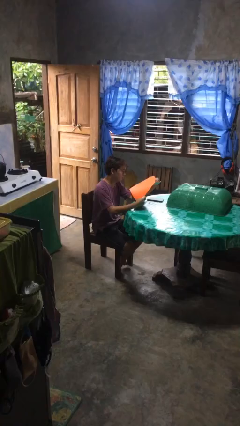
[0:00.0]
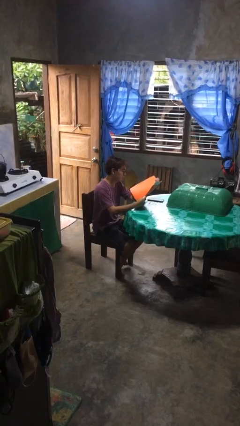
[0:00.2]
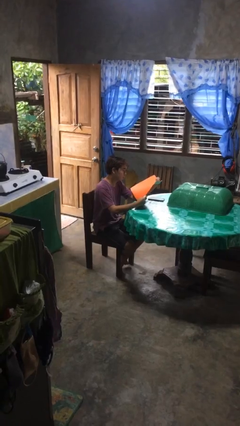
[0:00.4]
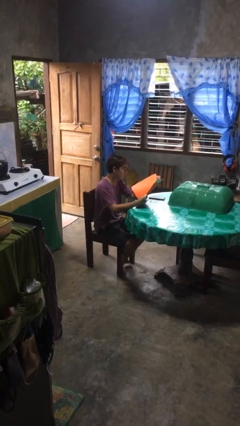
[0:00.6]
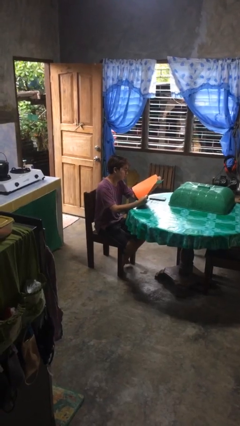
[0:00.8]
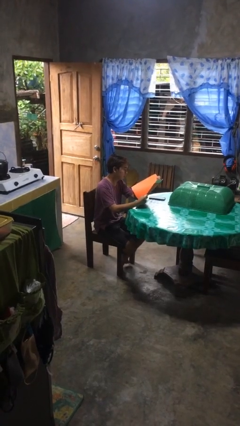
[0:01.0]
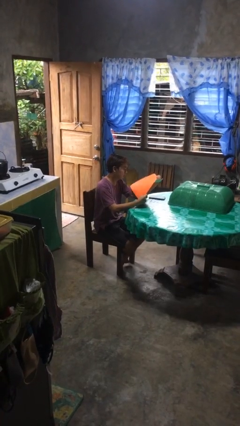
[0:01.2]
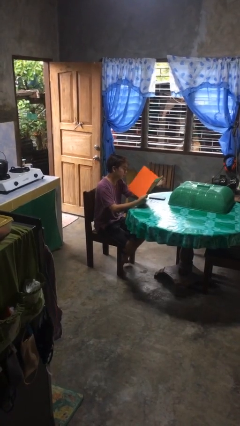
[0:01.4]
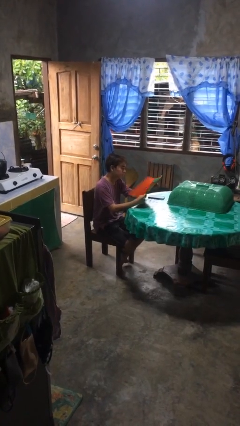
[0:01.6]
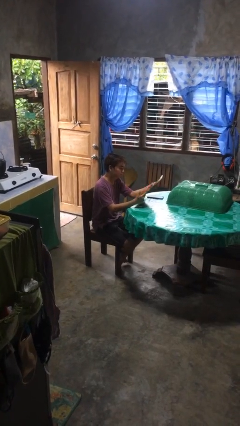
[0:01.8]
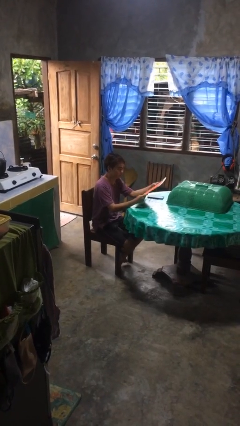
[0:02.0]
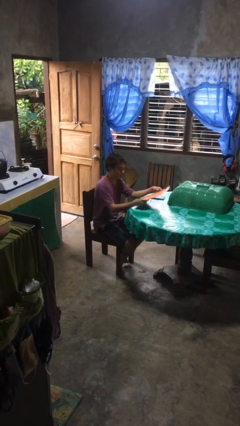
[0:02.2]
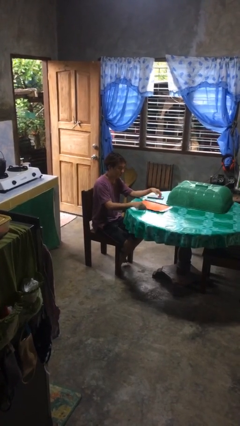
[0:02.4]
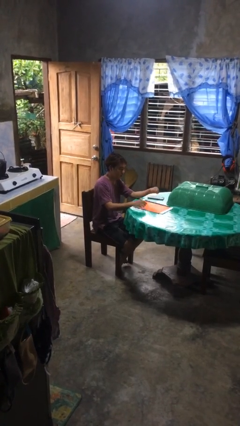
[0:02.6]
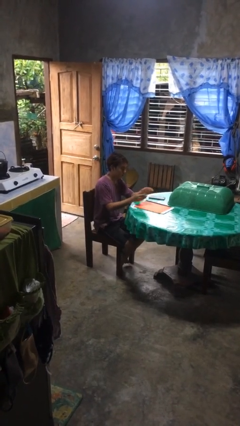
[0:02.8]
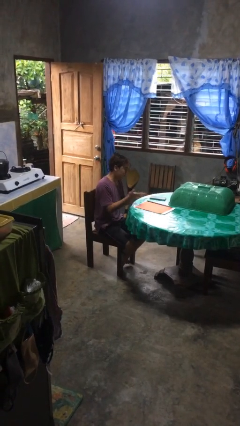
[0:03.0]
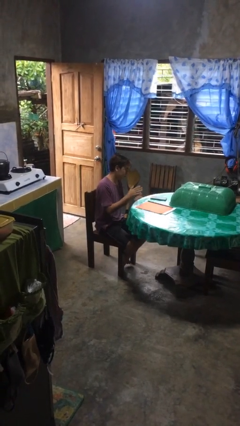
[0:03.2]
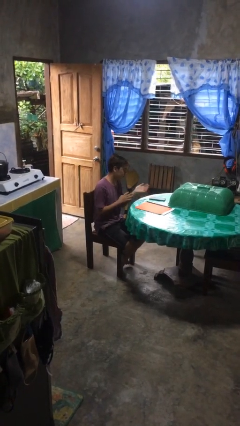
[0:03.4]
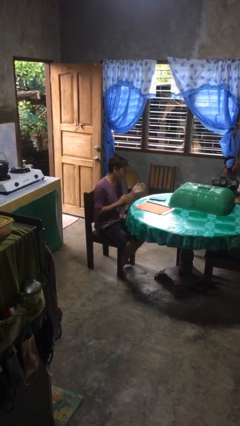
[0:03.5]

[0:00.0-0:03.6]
person puts down object on table

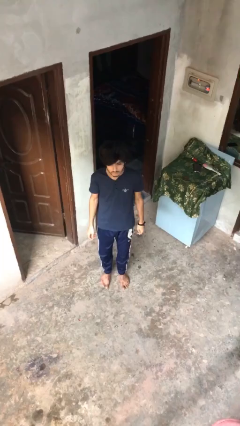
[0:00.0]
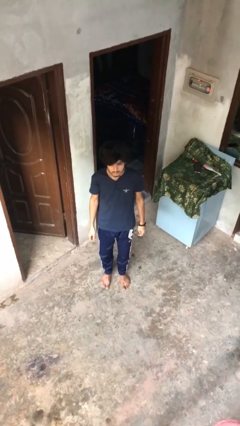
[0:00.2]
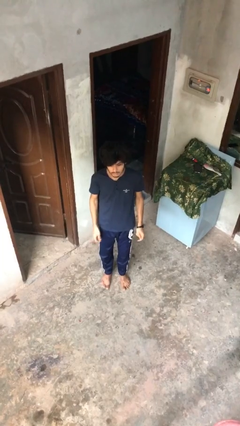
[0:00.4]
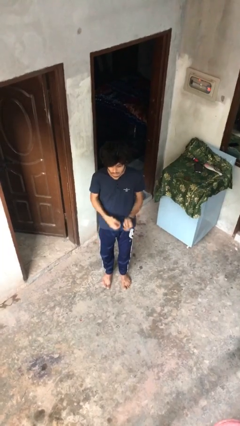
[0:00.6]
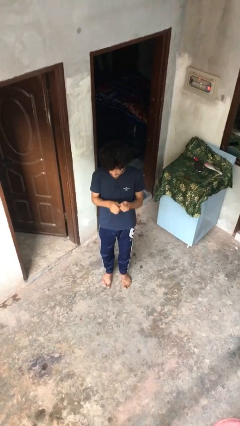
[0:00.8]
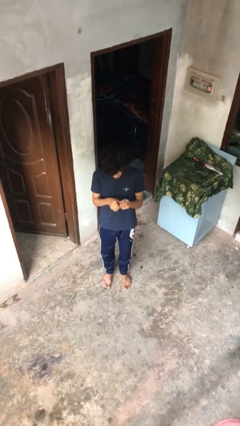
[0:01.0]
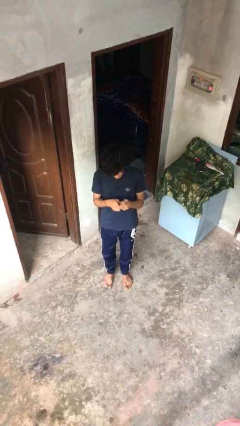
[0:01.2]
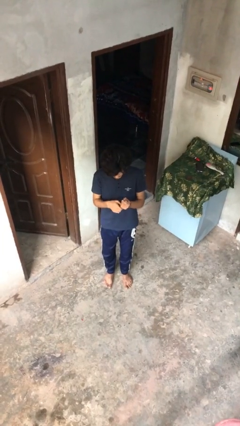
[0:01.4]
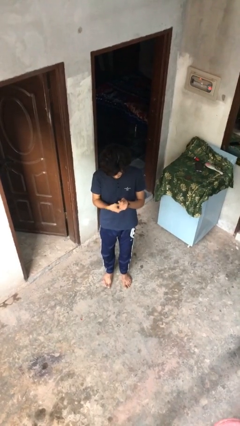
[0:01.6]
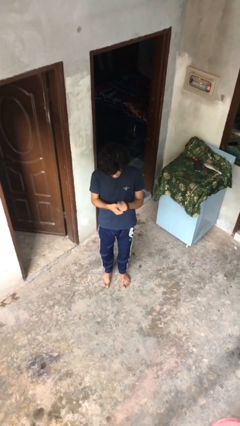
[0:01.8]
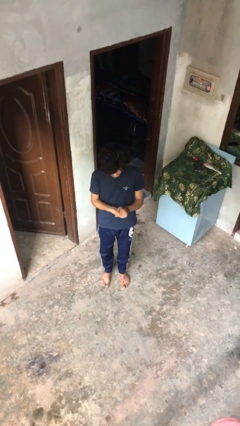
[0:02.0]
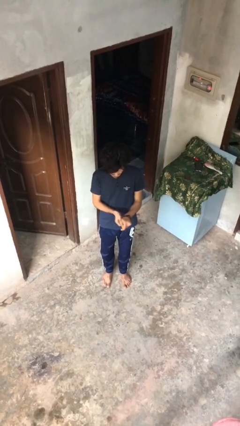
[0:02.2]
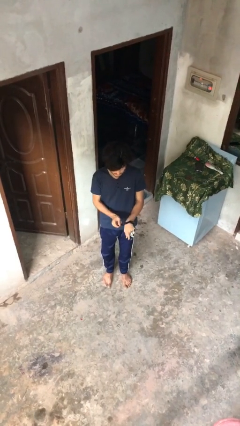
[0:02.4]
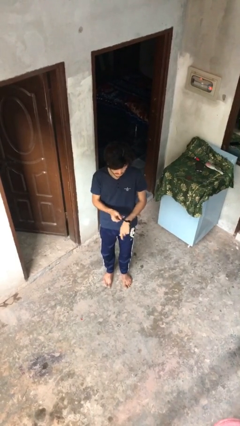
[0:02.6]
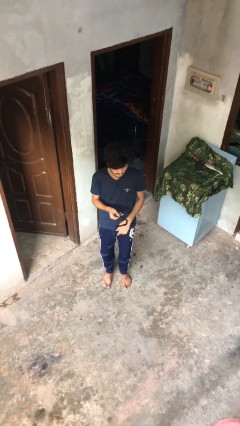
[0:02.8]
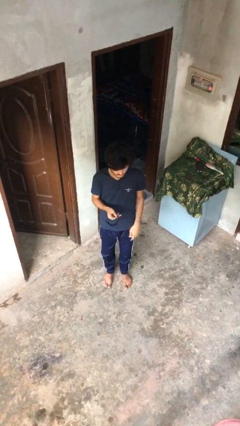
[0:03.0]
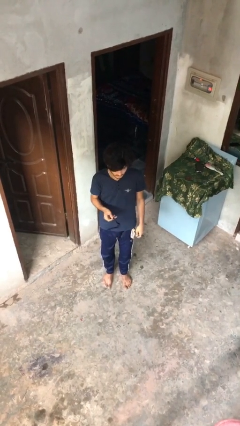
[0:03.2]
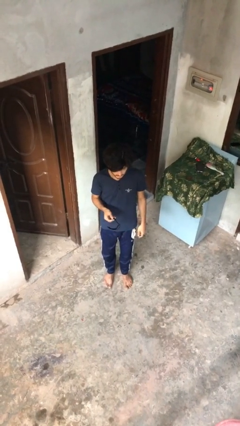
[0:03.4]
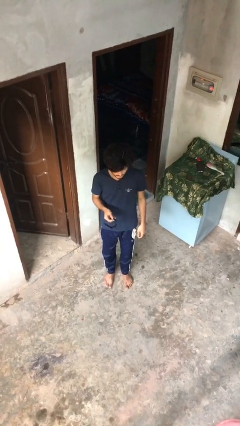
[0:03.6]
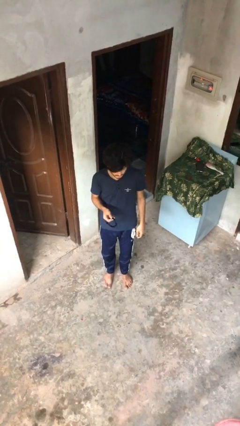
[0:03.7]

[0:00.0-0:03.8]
person takes off wristwatch

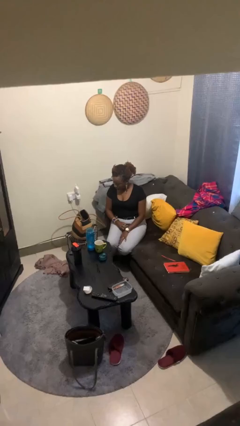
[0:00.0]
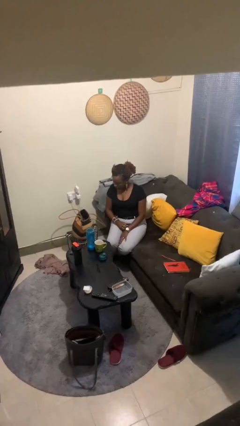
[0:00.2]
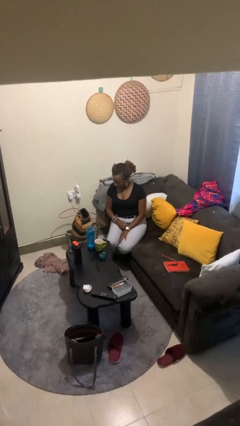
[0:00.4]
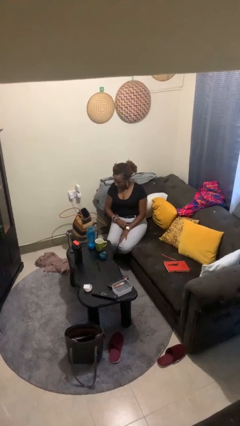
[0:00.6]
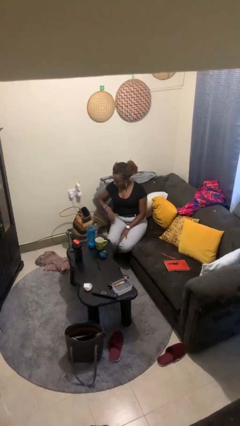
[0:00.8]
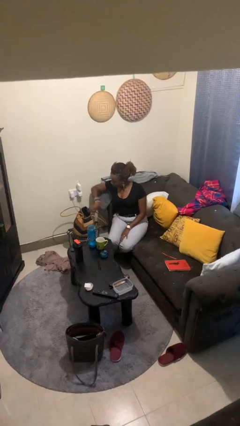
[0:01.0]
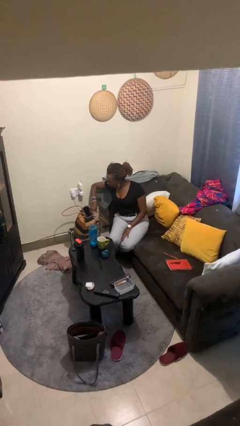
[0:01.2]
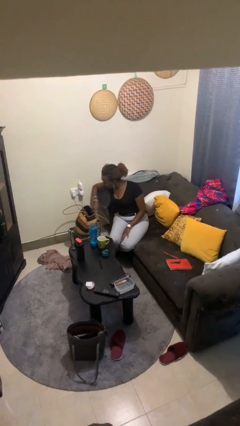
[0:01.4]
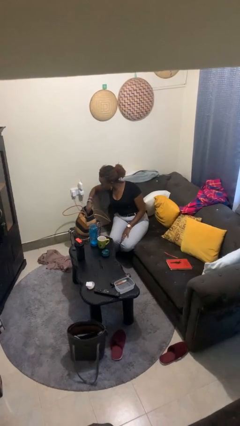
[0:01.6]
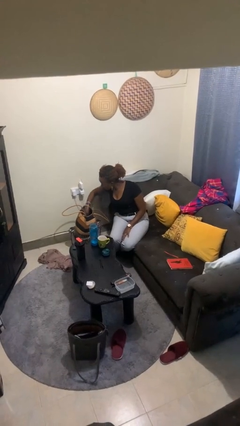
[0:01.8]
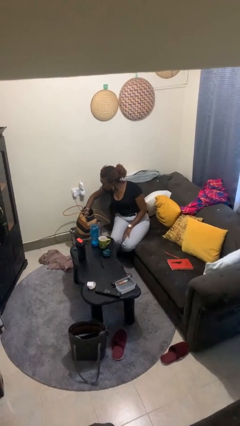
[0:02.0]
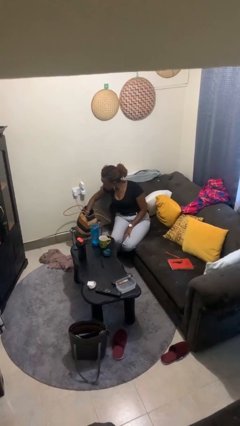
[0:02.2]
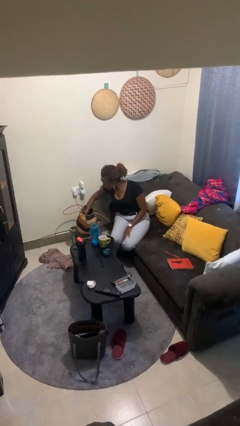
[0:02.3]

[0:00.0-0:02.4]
person searches in purse

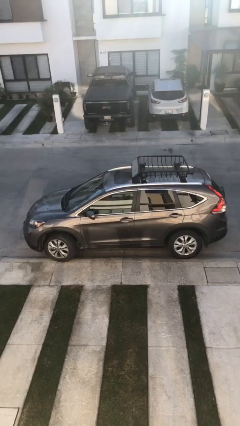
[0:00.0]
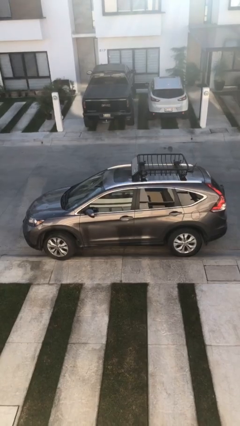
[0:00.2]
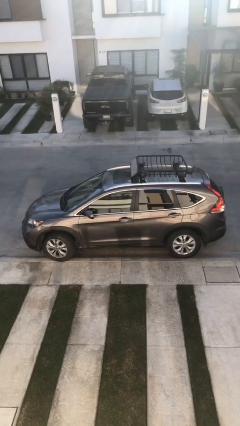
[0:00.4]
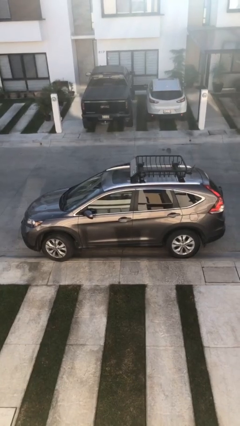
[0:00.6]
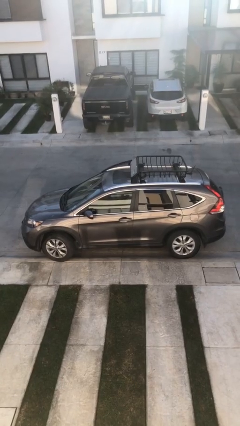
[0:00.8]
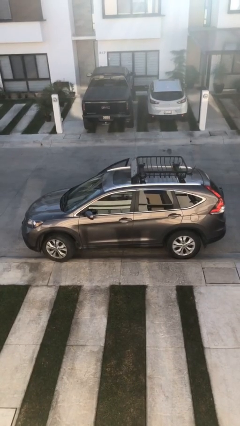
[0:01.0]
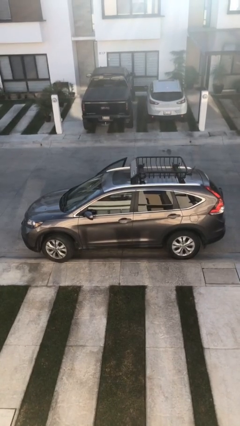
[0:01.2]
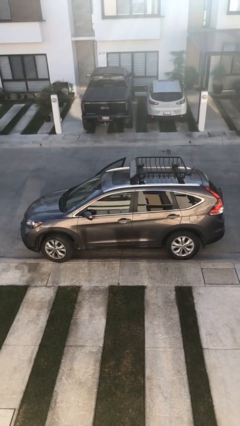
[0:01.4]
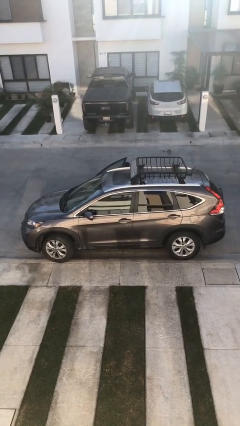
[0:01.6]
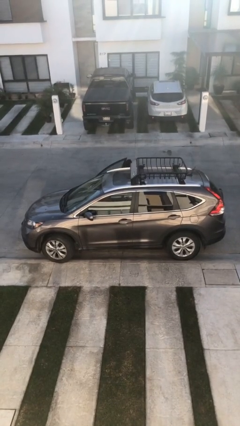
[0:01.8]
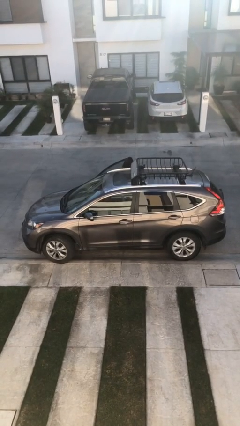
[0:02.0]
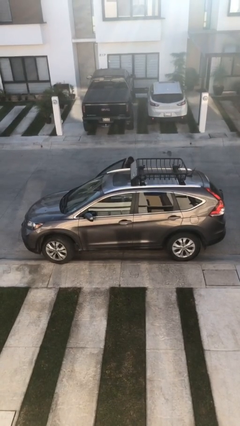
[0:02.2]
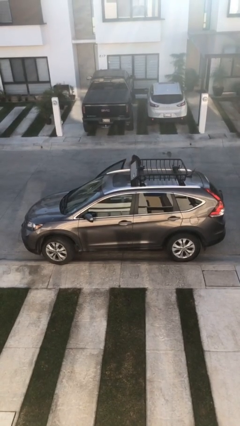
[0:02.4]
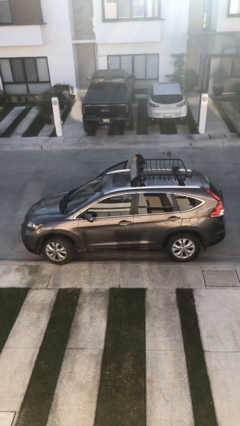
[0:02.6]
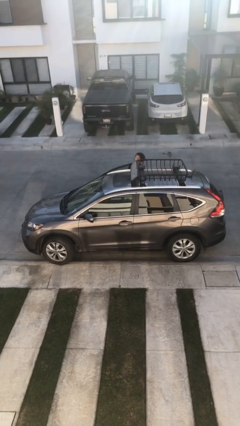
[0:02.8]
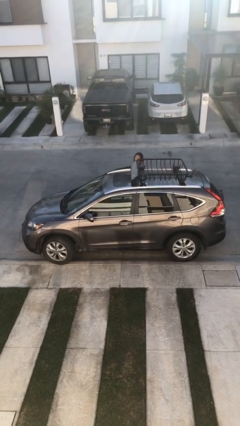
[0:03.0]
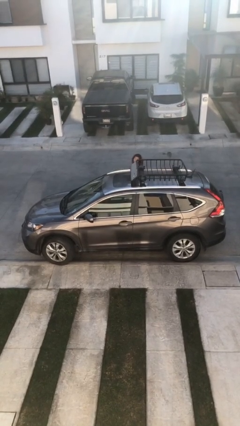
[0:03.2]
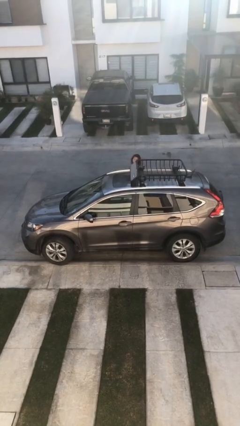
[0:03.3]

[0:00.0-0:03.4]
car drops off person

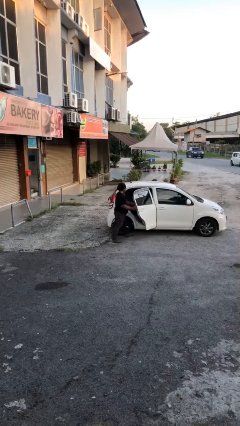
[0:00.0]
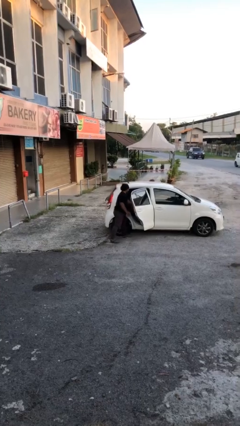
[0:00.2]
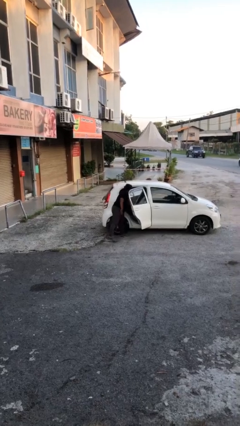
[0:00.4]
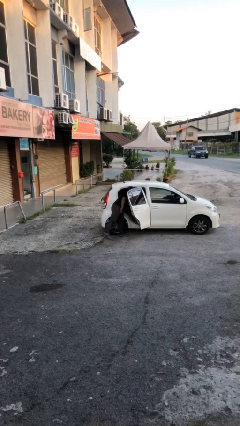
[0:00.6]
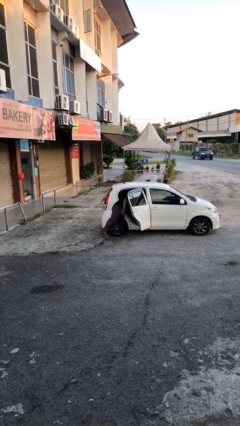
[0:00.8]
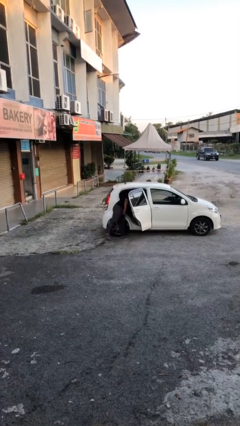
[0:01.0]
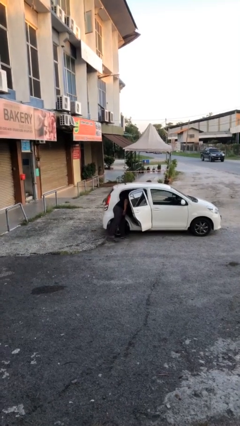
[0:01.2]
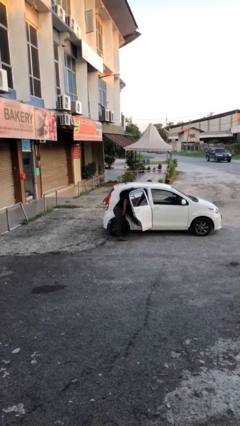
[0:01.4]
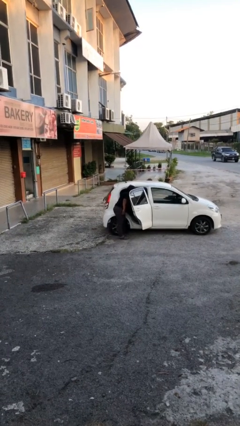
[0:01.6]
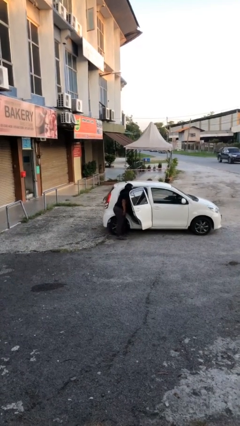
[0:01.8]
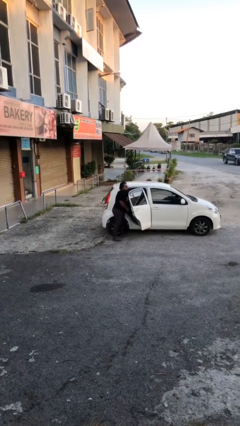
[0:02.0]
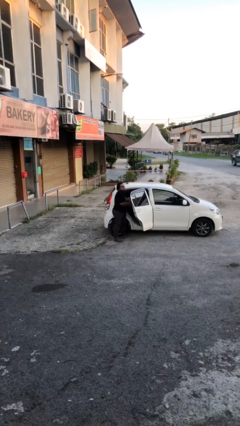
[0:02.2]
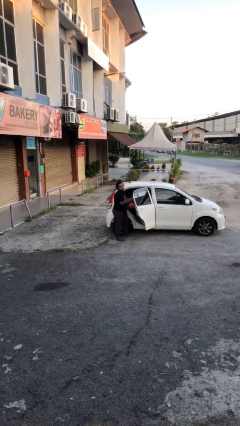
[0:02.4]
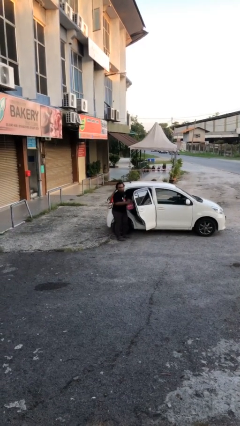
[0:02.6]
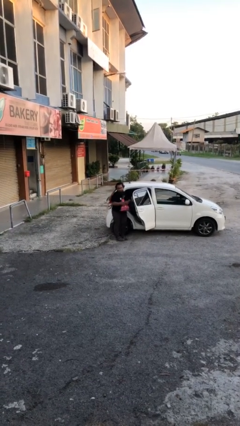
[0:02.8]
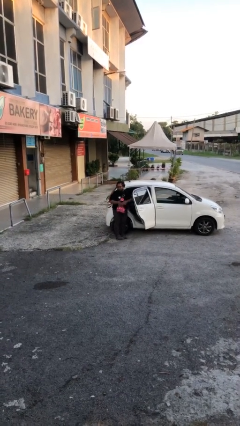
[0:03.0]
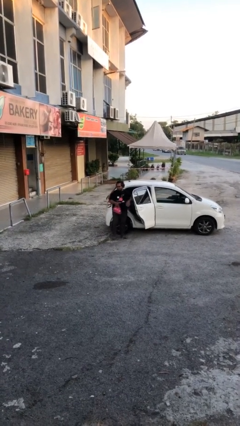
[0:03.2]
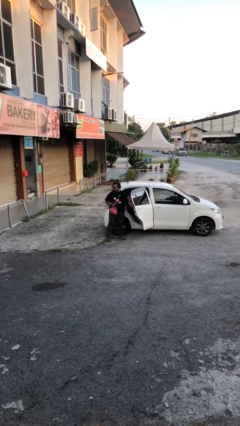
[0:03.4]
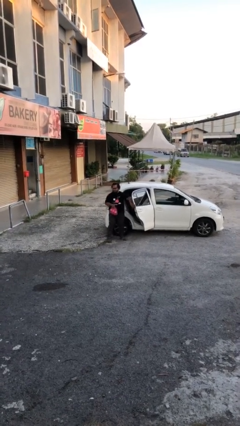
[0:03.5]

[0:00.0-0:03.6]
person unloads car

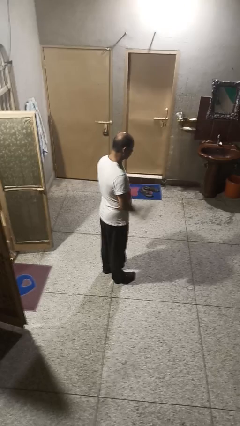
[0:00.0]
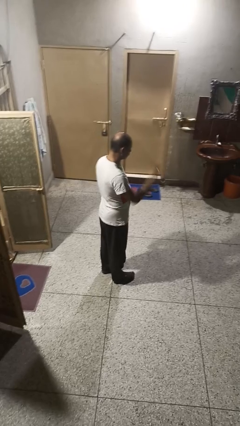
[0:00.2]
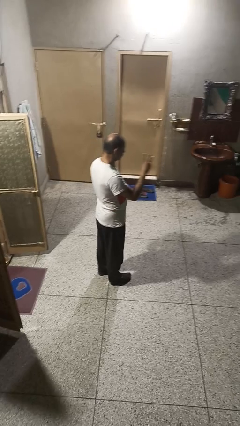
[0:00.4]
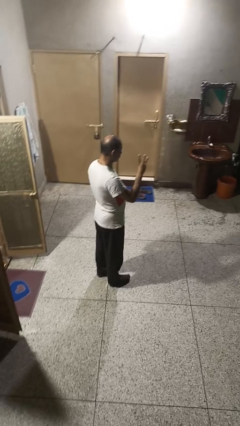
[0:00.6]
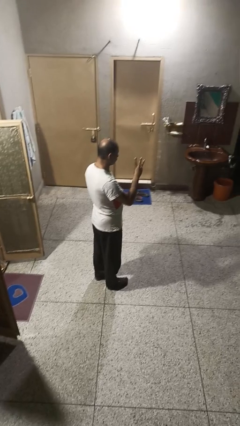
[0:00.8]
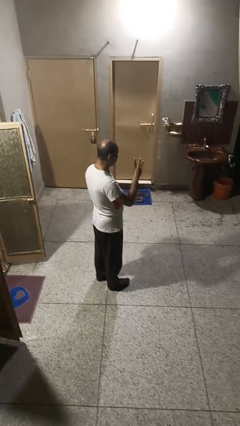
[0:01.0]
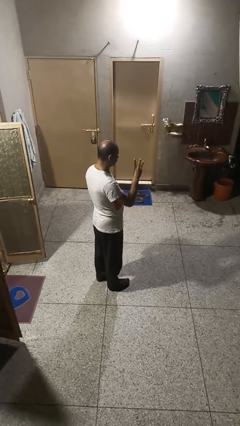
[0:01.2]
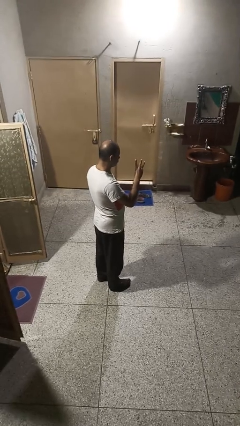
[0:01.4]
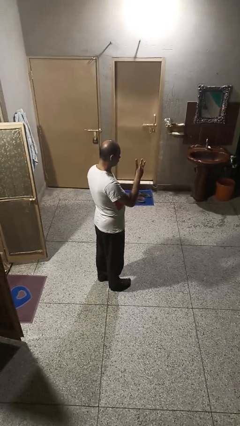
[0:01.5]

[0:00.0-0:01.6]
person gestures number three
